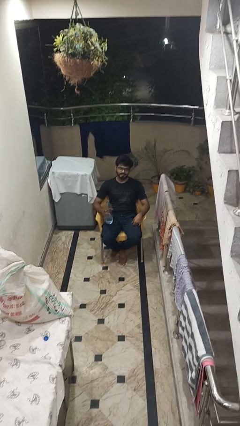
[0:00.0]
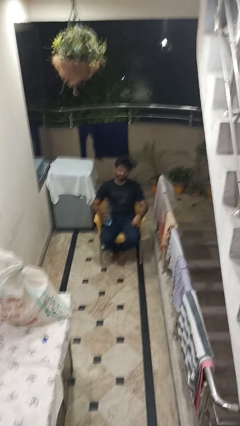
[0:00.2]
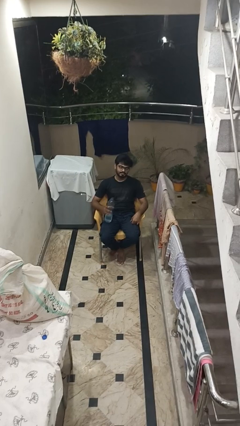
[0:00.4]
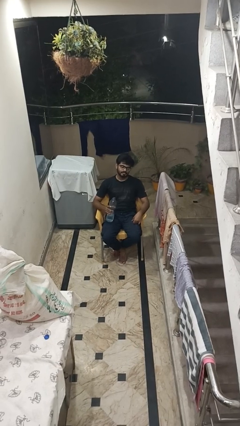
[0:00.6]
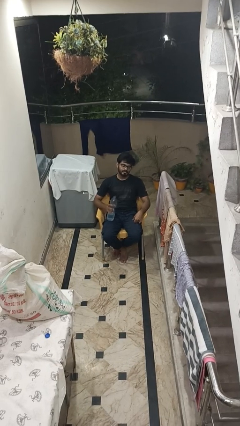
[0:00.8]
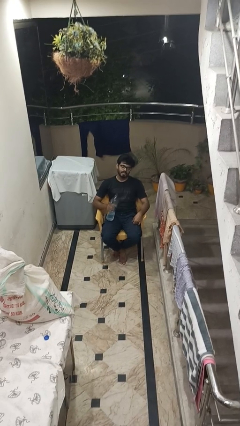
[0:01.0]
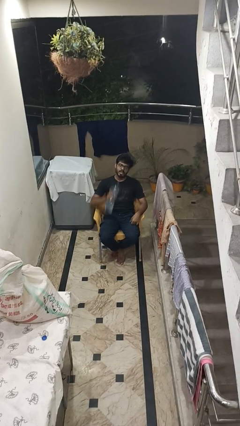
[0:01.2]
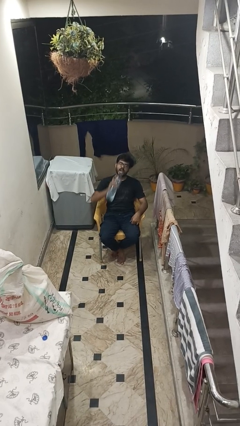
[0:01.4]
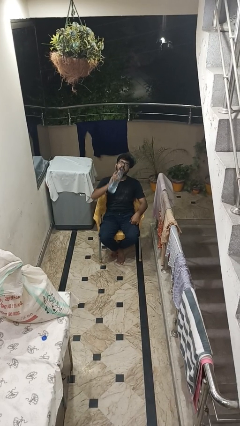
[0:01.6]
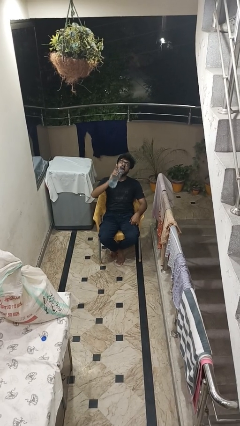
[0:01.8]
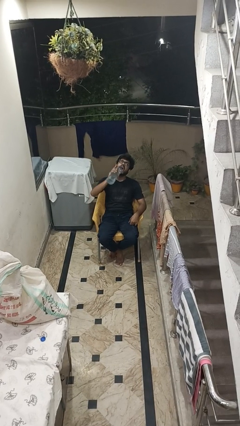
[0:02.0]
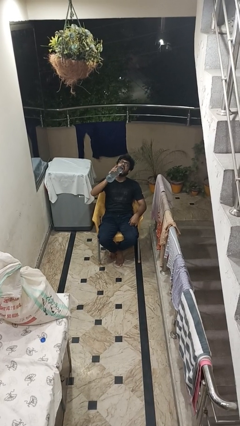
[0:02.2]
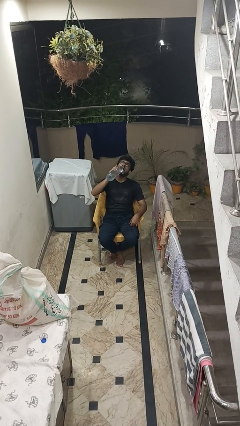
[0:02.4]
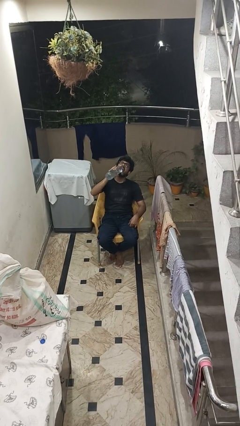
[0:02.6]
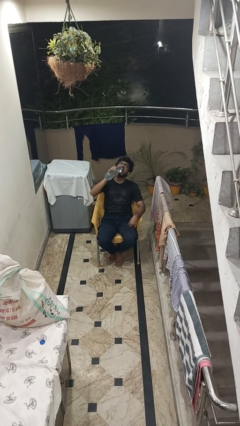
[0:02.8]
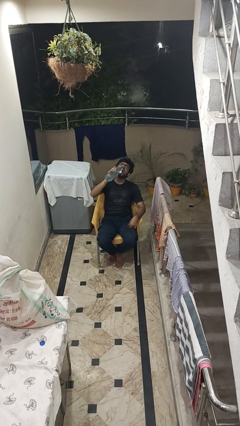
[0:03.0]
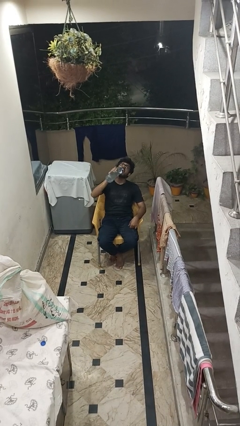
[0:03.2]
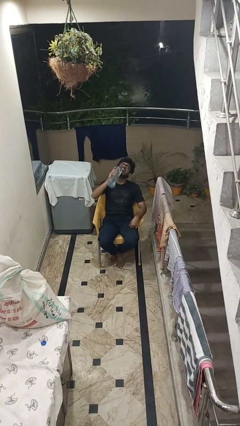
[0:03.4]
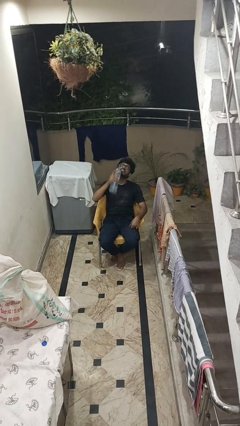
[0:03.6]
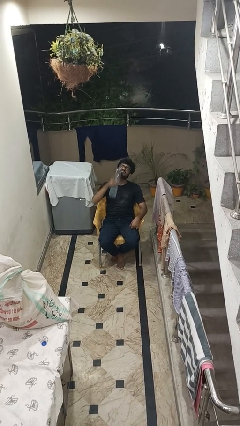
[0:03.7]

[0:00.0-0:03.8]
person drinks from bottle

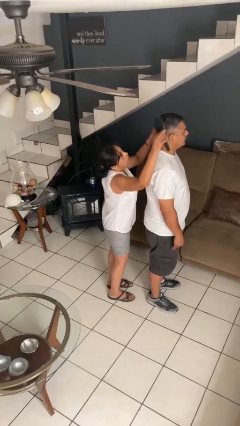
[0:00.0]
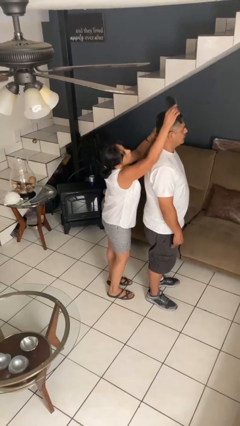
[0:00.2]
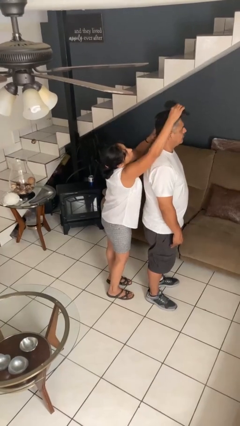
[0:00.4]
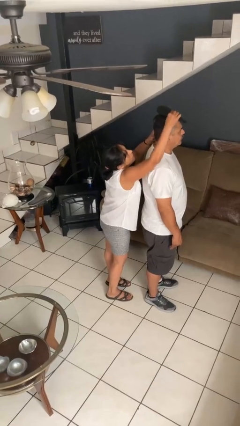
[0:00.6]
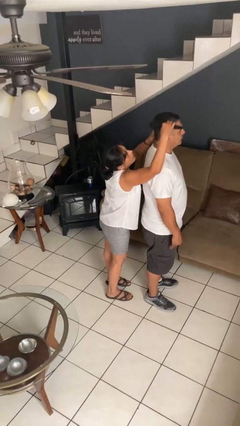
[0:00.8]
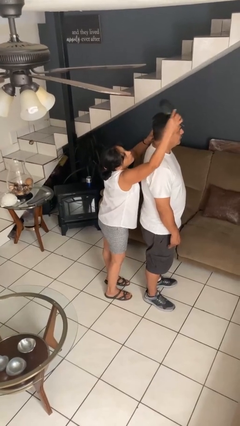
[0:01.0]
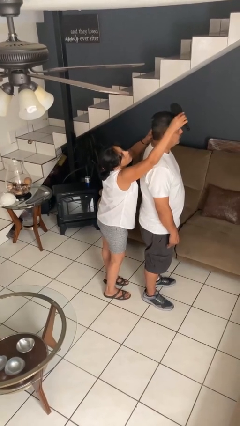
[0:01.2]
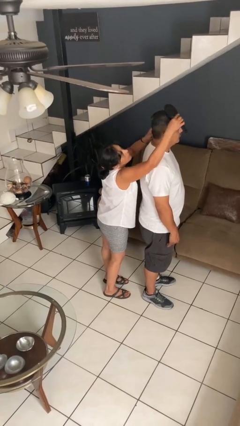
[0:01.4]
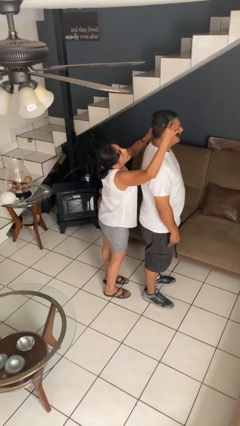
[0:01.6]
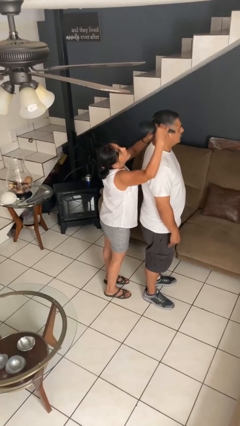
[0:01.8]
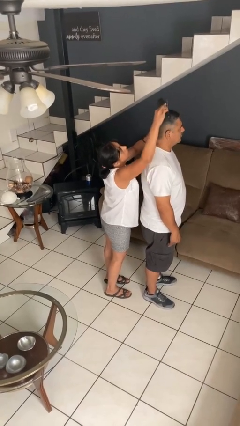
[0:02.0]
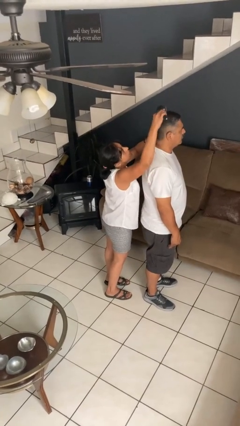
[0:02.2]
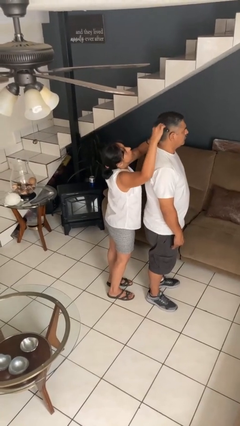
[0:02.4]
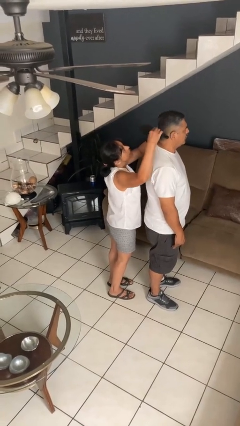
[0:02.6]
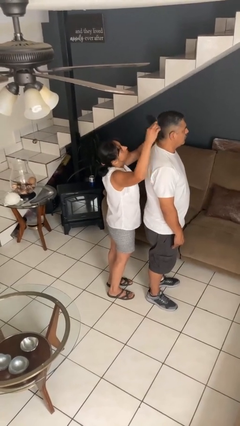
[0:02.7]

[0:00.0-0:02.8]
person brushes hair of person

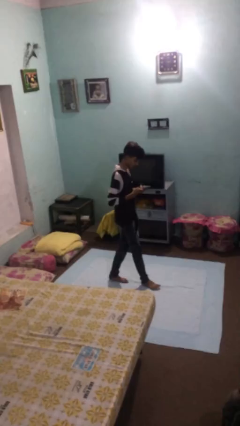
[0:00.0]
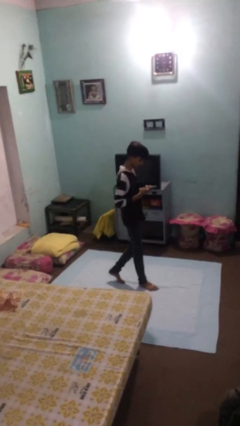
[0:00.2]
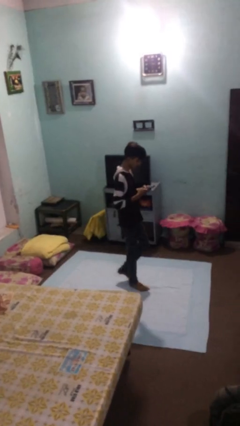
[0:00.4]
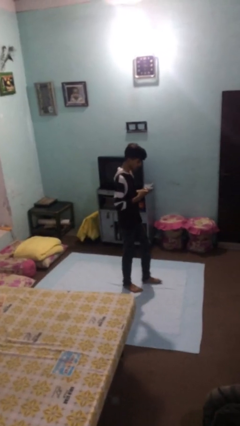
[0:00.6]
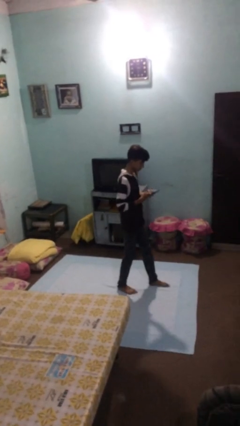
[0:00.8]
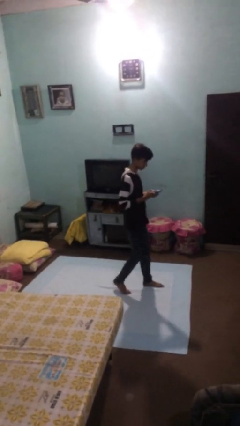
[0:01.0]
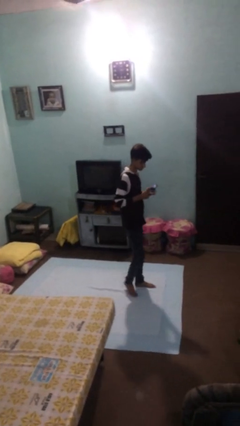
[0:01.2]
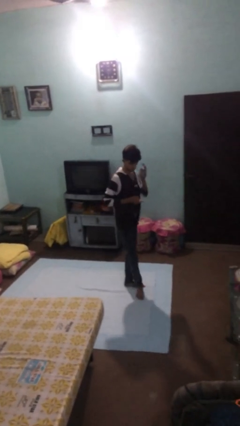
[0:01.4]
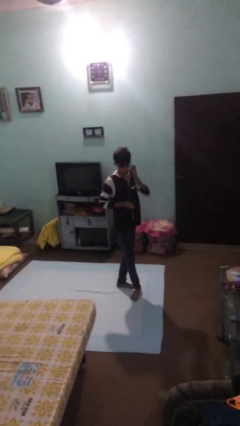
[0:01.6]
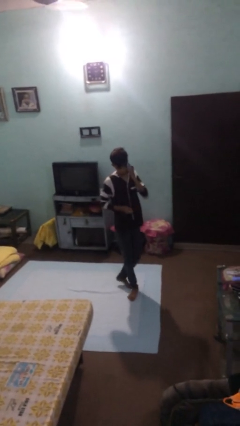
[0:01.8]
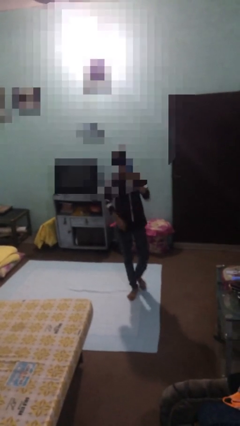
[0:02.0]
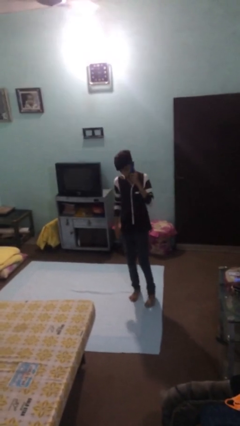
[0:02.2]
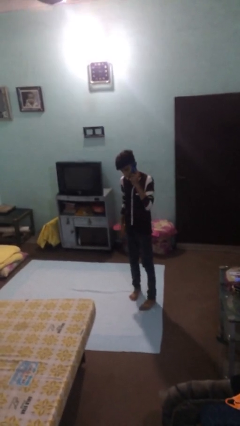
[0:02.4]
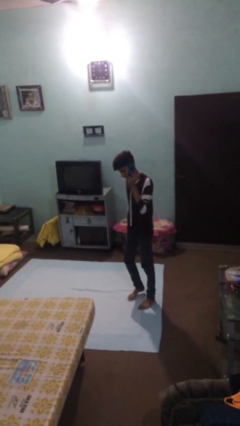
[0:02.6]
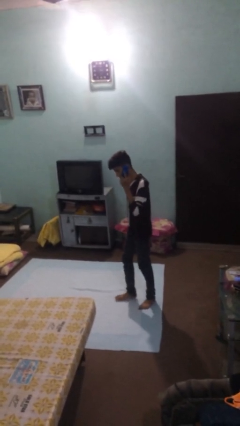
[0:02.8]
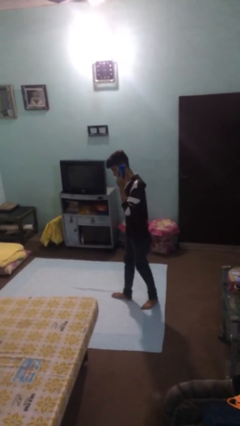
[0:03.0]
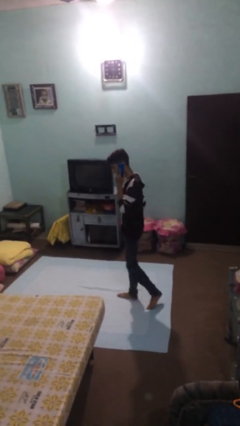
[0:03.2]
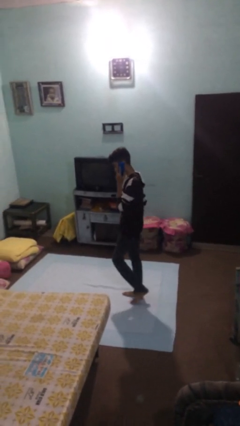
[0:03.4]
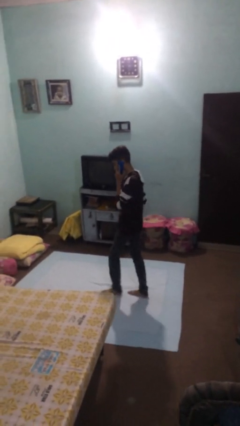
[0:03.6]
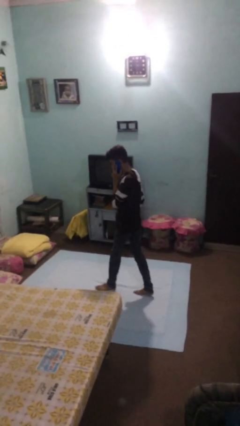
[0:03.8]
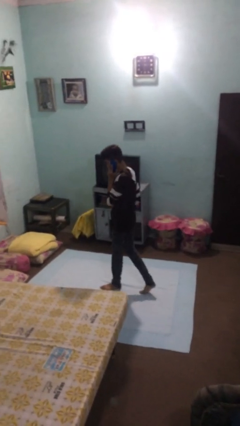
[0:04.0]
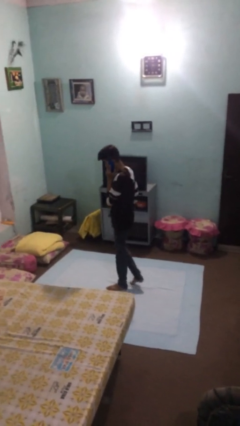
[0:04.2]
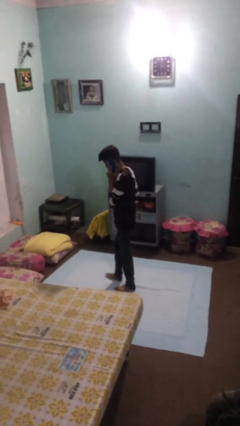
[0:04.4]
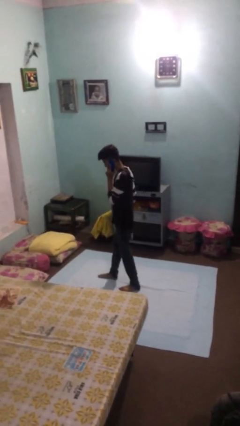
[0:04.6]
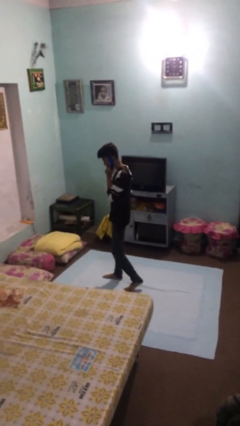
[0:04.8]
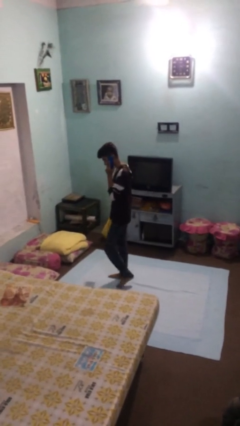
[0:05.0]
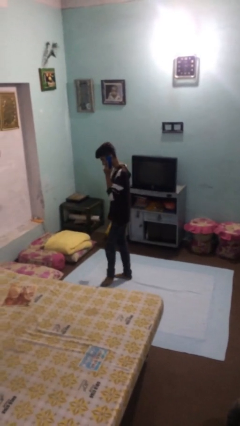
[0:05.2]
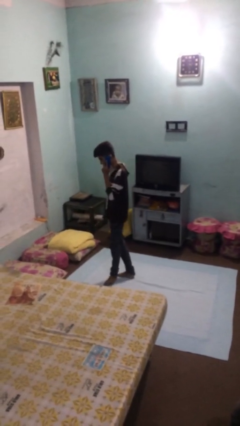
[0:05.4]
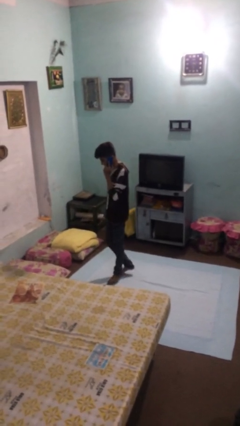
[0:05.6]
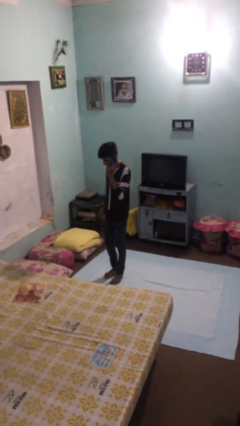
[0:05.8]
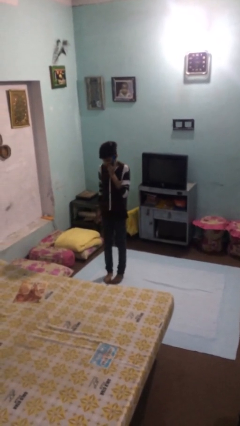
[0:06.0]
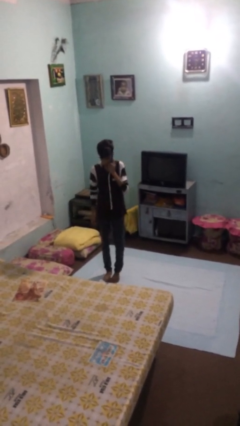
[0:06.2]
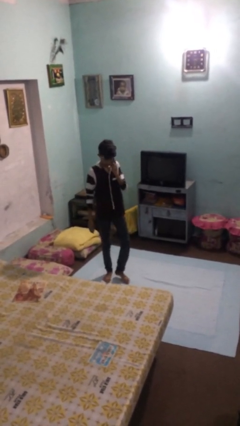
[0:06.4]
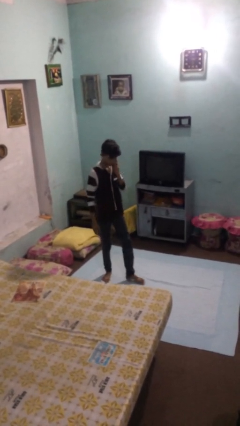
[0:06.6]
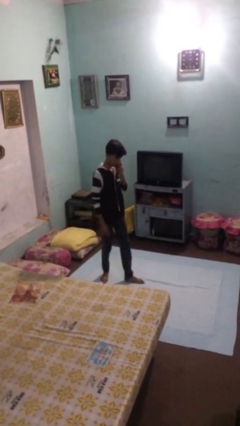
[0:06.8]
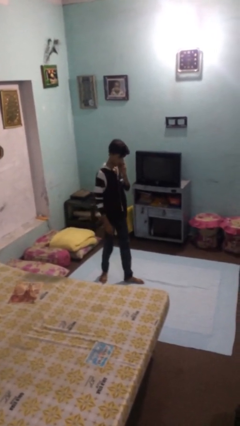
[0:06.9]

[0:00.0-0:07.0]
person talks on phone

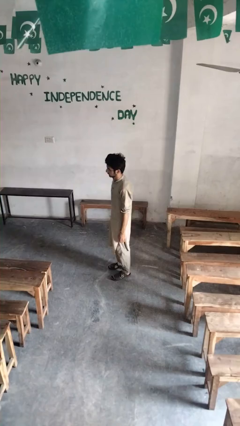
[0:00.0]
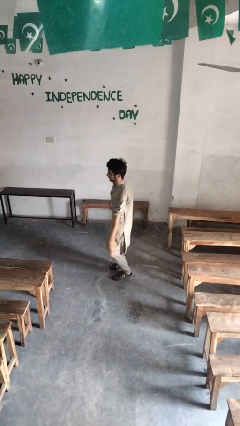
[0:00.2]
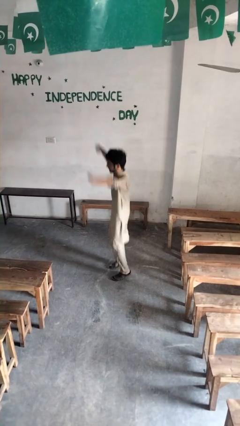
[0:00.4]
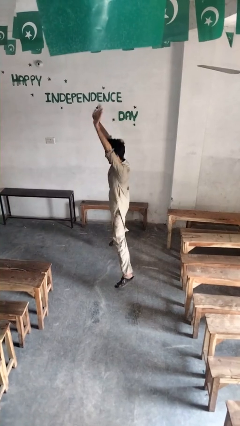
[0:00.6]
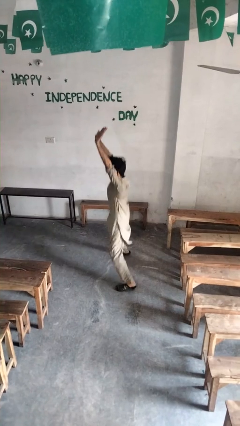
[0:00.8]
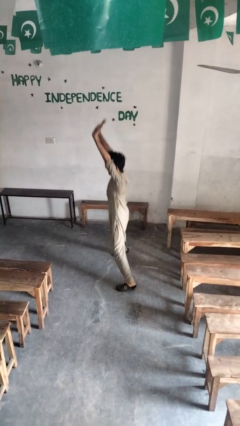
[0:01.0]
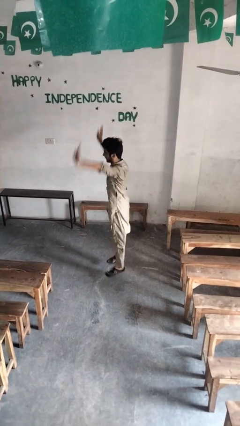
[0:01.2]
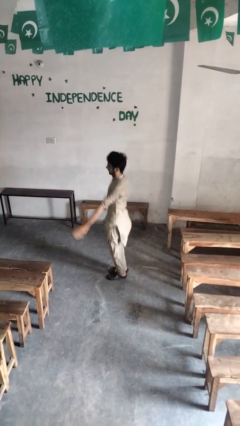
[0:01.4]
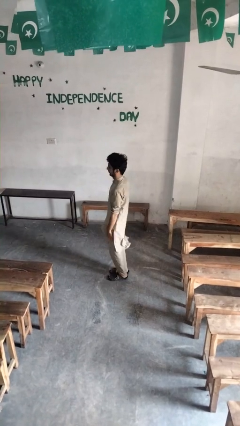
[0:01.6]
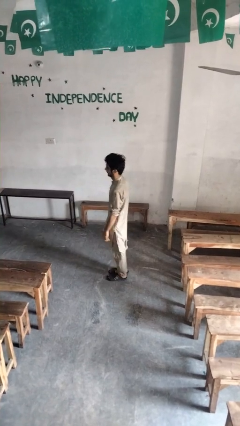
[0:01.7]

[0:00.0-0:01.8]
person exercises with jumping jacks

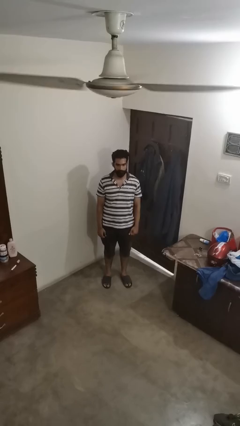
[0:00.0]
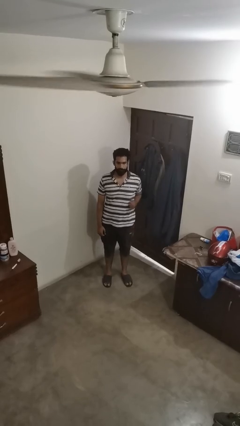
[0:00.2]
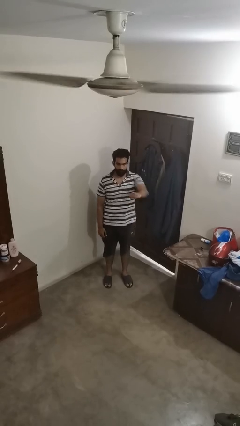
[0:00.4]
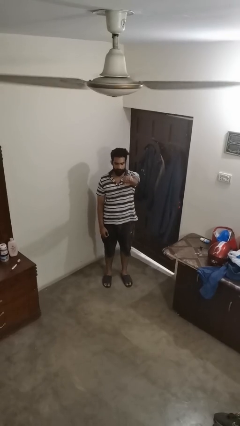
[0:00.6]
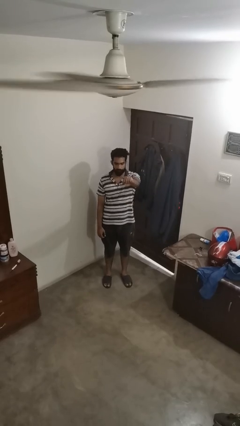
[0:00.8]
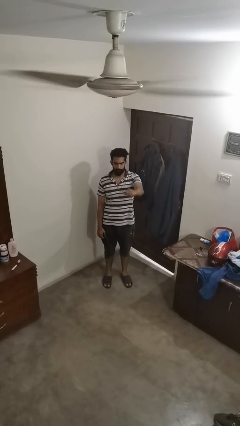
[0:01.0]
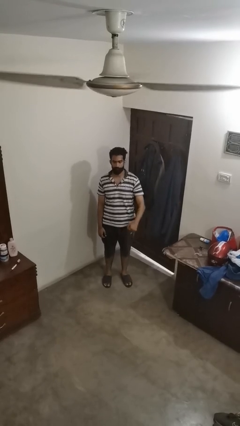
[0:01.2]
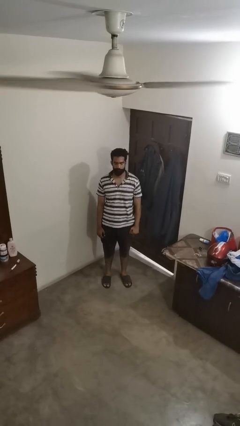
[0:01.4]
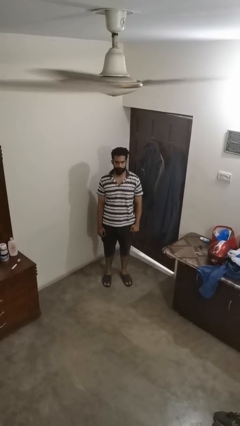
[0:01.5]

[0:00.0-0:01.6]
person punches

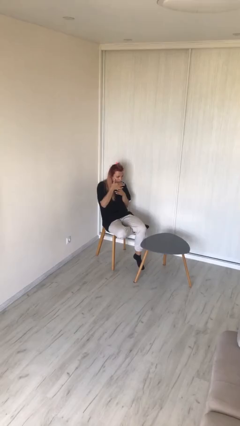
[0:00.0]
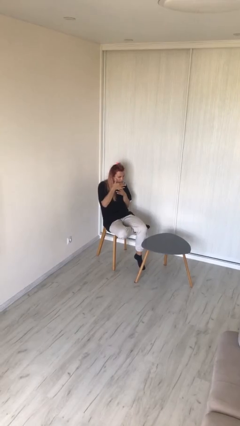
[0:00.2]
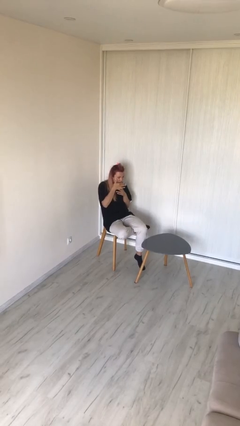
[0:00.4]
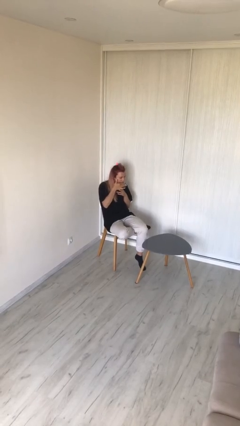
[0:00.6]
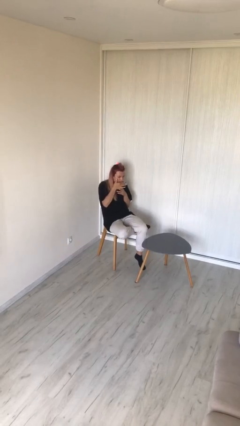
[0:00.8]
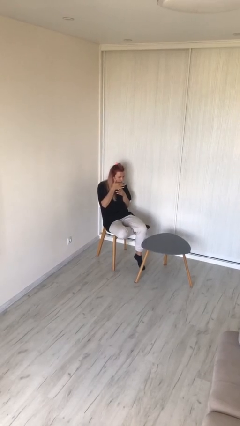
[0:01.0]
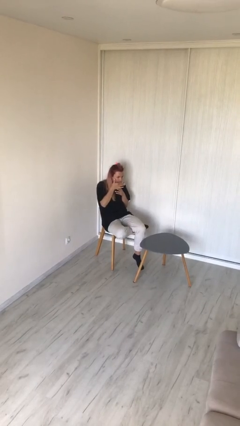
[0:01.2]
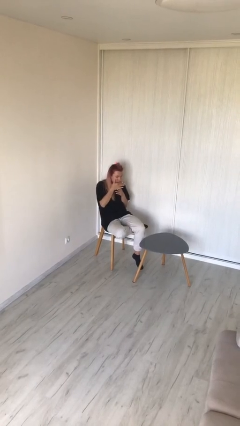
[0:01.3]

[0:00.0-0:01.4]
person licks fingers
